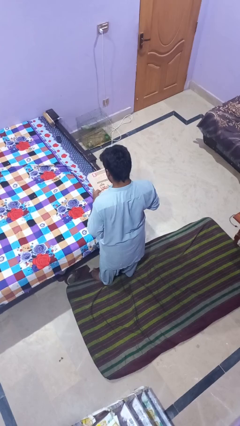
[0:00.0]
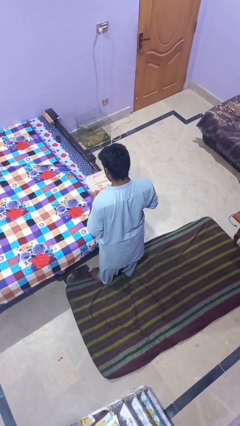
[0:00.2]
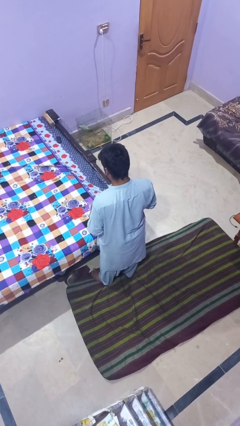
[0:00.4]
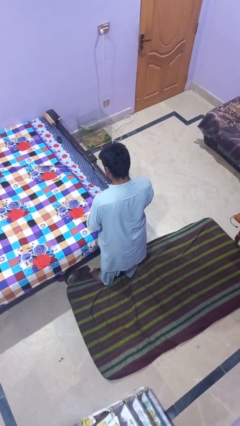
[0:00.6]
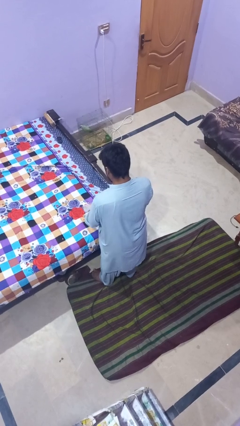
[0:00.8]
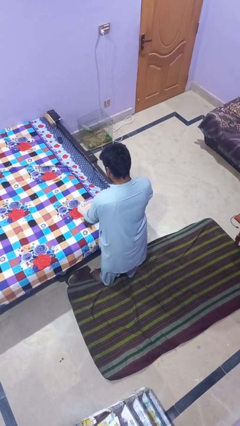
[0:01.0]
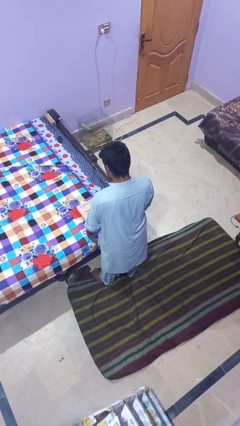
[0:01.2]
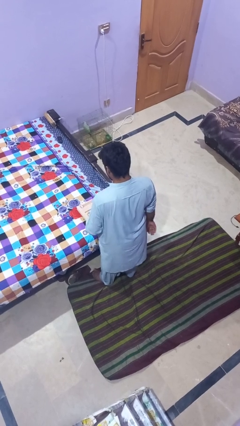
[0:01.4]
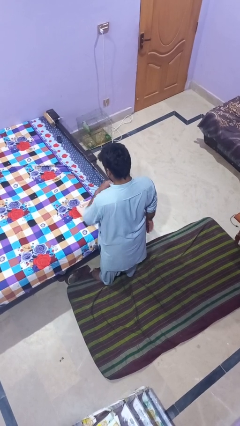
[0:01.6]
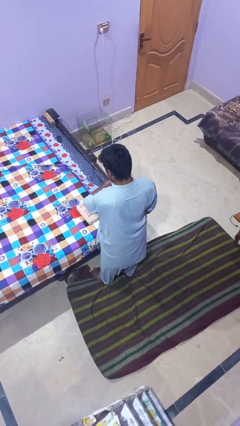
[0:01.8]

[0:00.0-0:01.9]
person puts down object on bed

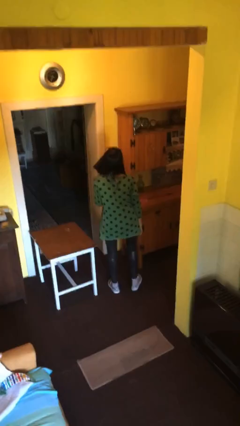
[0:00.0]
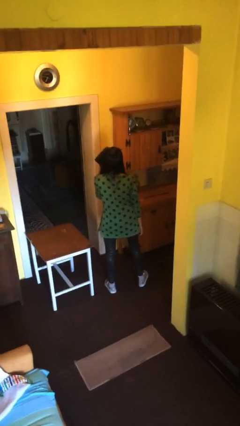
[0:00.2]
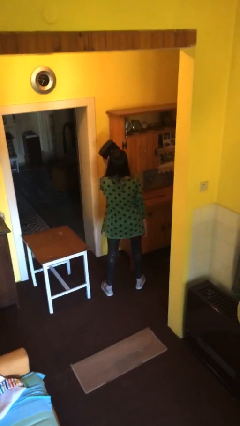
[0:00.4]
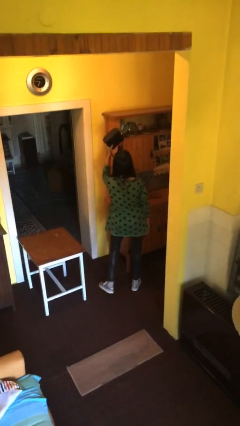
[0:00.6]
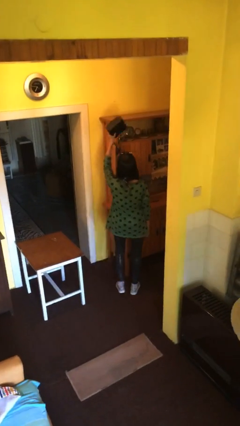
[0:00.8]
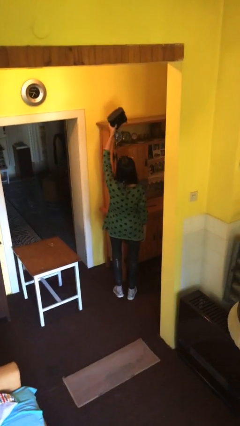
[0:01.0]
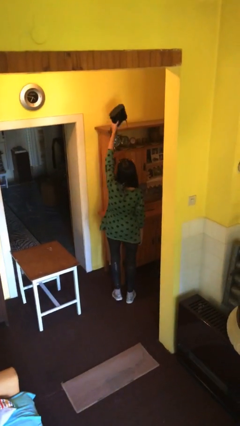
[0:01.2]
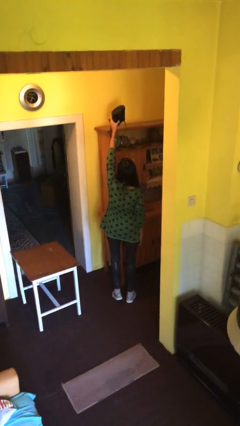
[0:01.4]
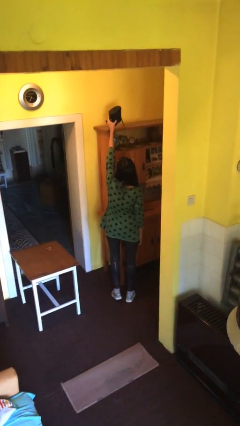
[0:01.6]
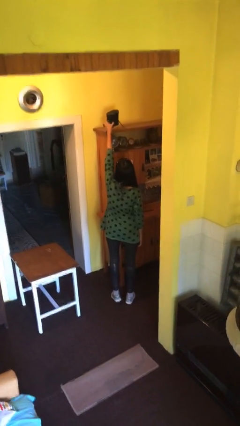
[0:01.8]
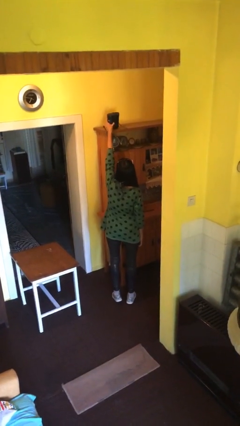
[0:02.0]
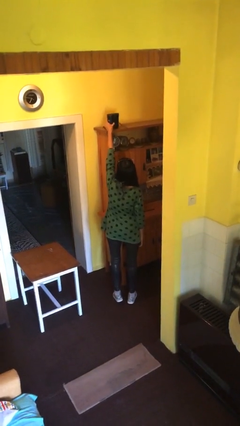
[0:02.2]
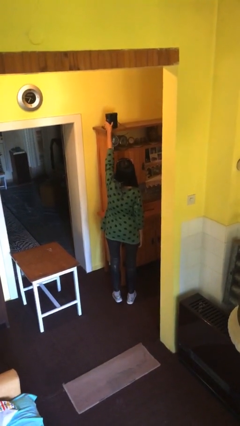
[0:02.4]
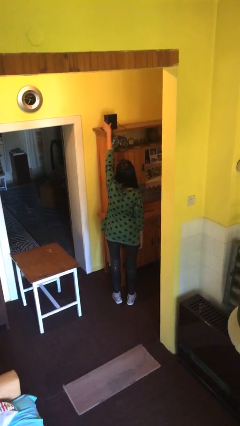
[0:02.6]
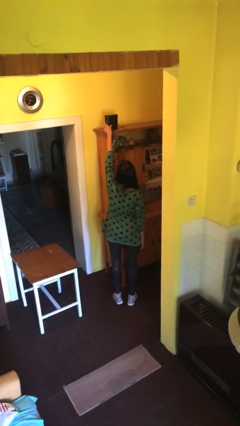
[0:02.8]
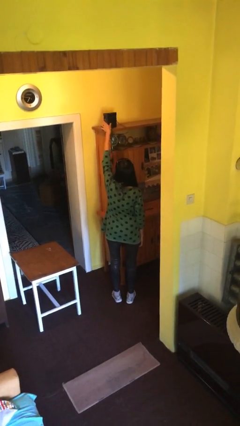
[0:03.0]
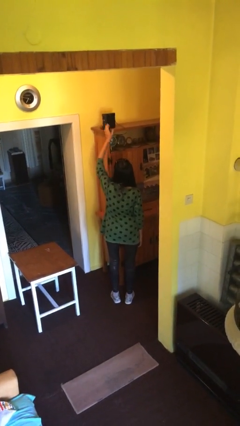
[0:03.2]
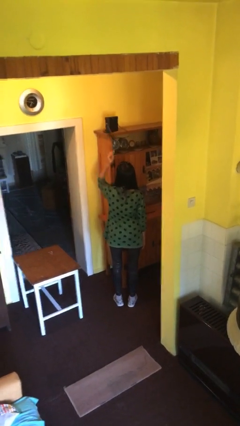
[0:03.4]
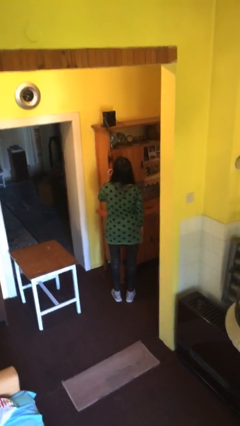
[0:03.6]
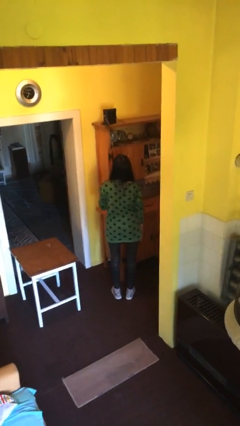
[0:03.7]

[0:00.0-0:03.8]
person puts down object on shelf

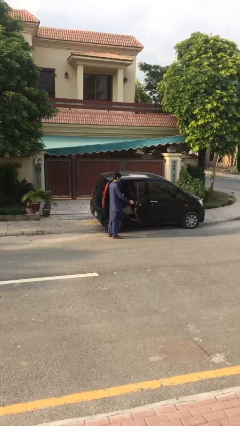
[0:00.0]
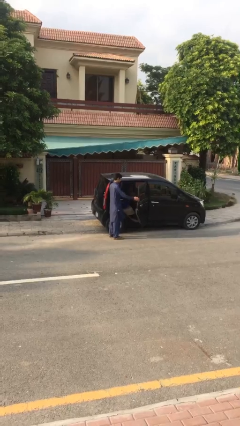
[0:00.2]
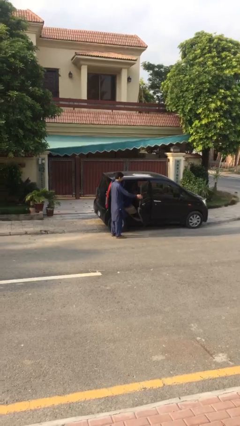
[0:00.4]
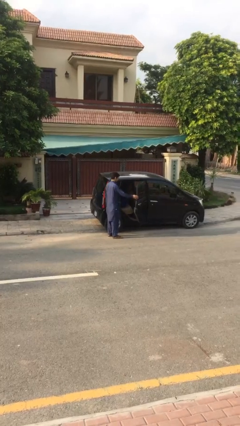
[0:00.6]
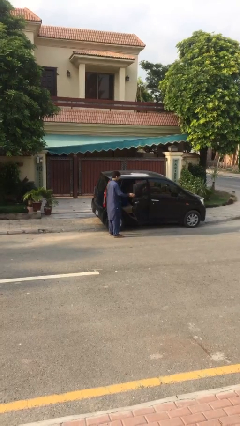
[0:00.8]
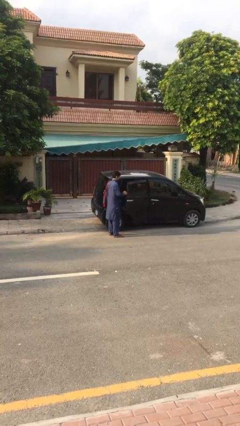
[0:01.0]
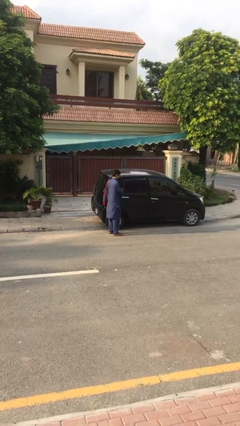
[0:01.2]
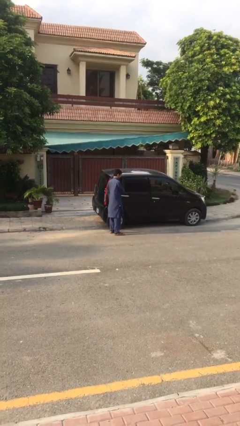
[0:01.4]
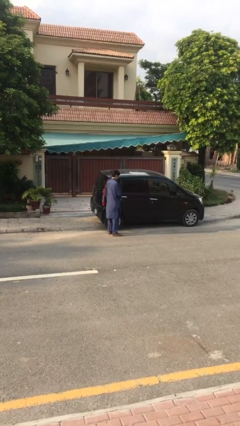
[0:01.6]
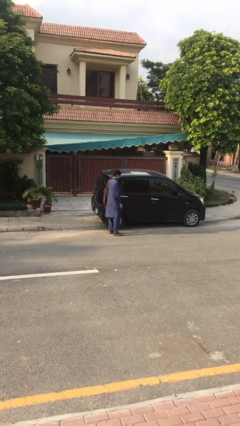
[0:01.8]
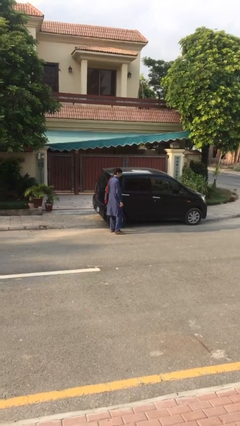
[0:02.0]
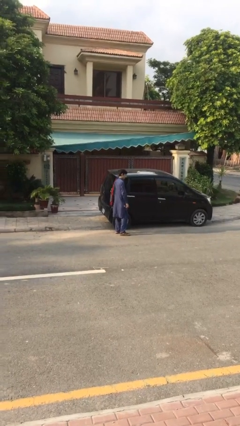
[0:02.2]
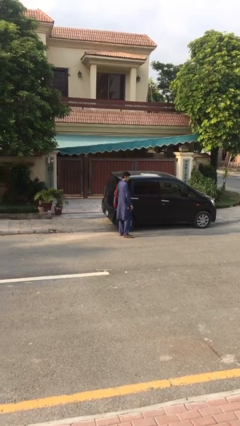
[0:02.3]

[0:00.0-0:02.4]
person closes car door

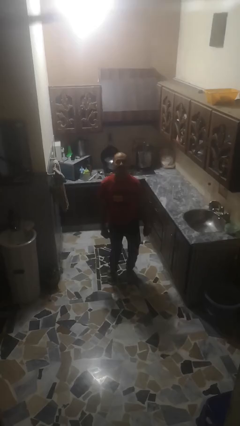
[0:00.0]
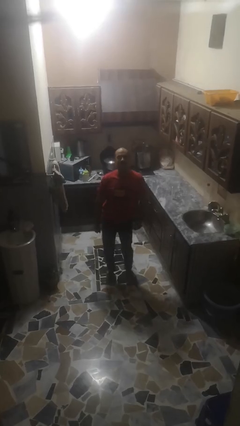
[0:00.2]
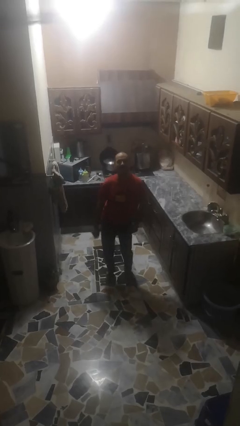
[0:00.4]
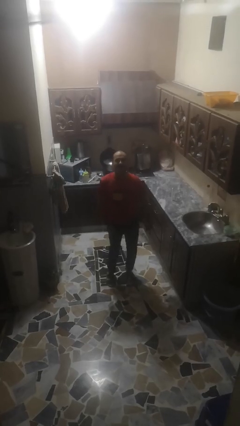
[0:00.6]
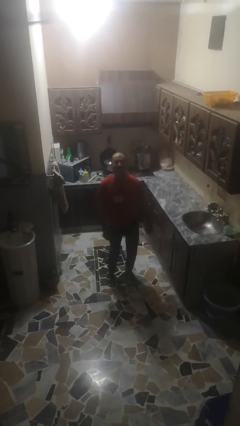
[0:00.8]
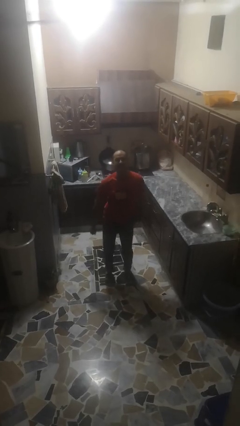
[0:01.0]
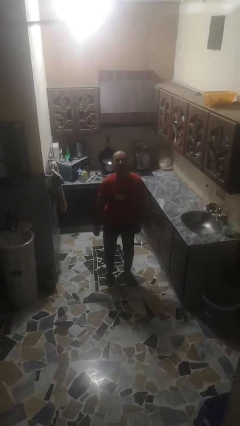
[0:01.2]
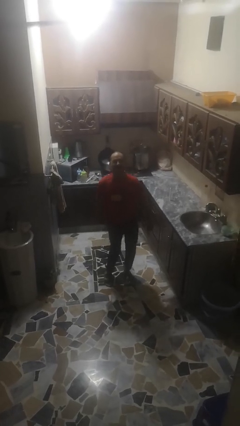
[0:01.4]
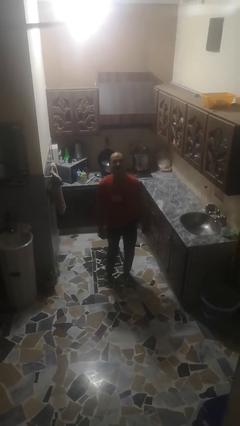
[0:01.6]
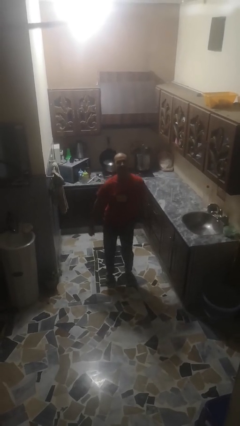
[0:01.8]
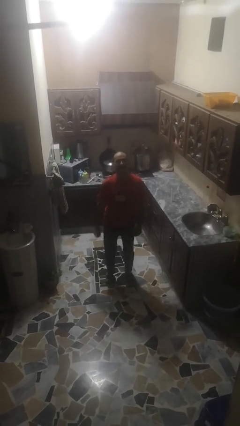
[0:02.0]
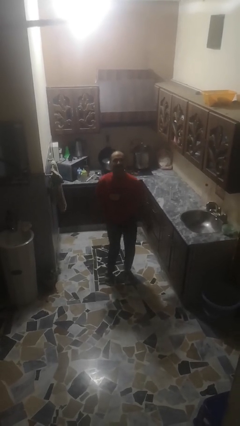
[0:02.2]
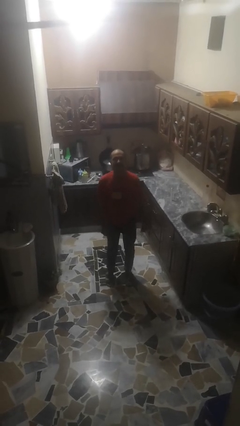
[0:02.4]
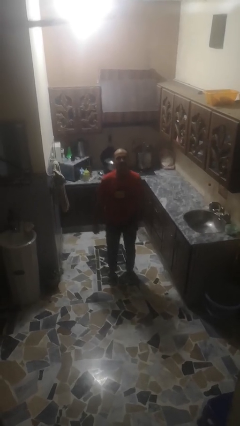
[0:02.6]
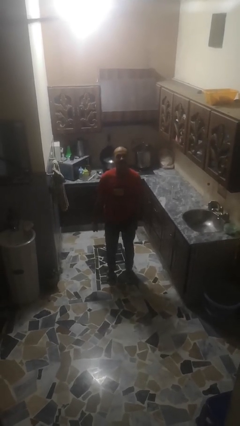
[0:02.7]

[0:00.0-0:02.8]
person wiggles hips

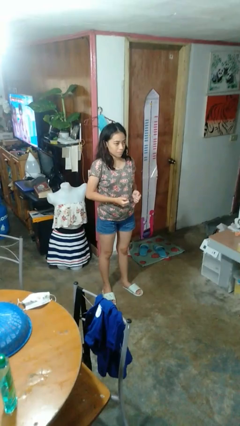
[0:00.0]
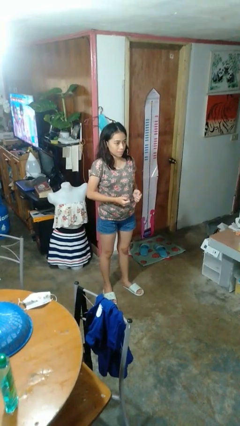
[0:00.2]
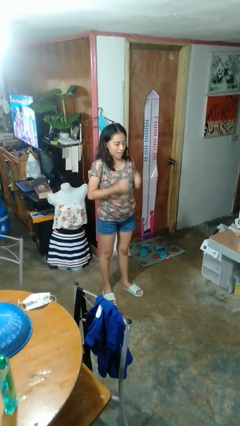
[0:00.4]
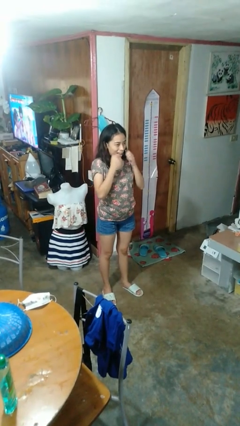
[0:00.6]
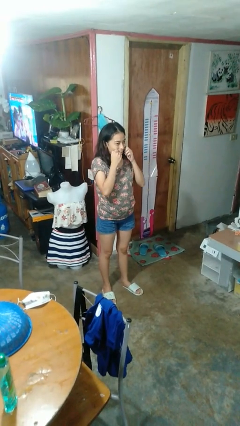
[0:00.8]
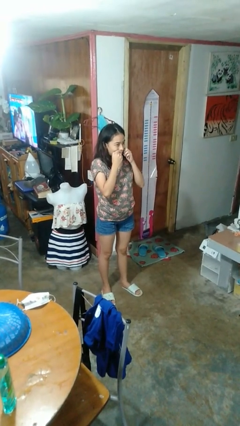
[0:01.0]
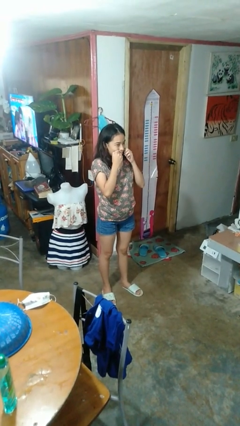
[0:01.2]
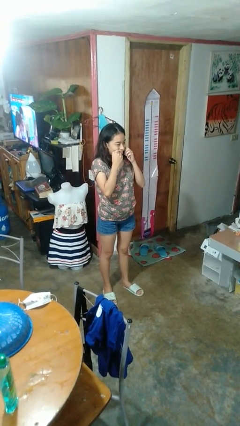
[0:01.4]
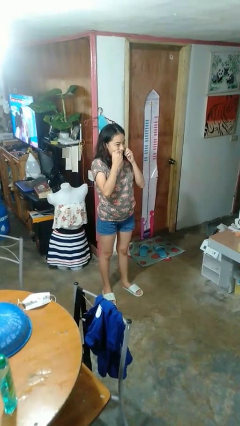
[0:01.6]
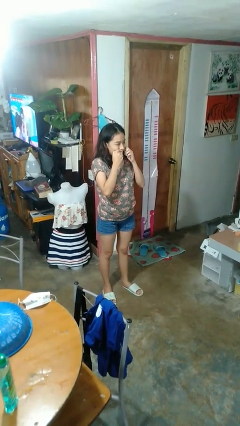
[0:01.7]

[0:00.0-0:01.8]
person flosses

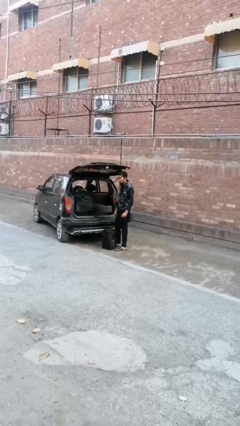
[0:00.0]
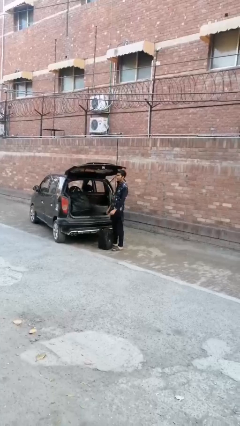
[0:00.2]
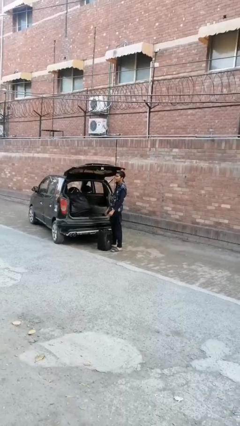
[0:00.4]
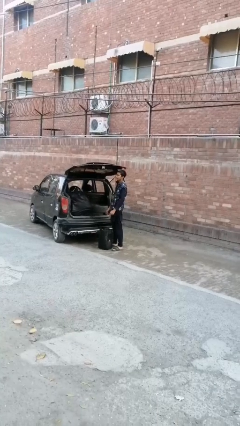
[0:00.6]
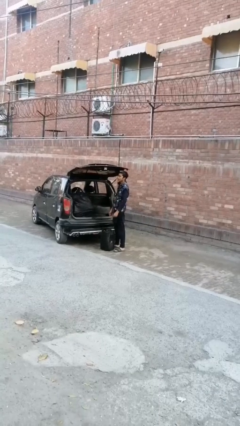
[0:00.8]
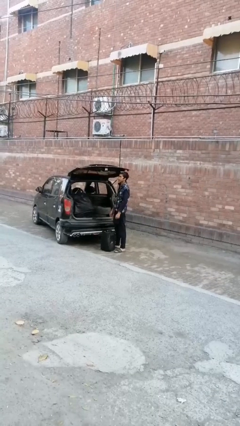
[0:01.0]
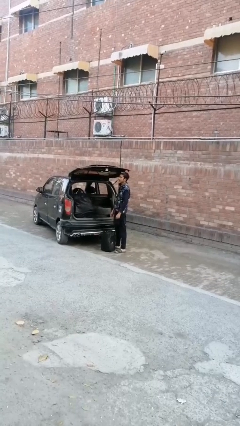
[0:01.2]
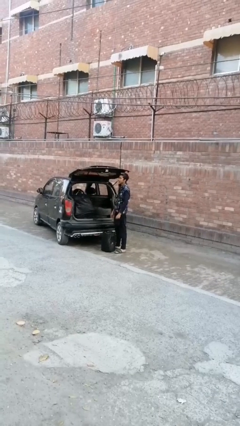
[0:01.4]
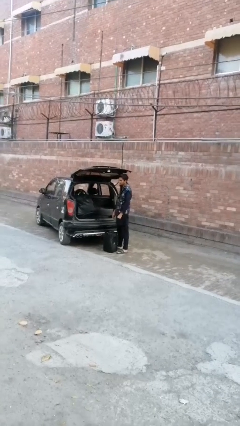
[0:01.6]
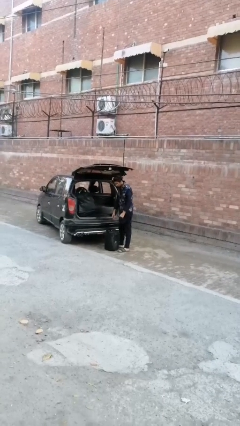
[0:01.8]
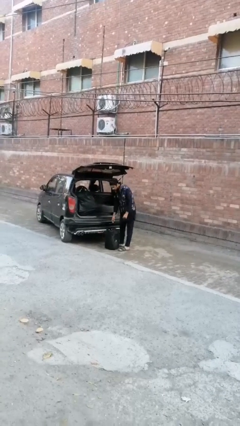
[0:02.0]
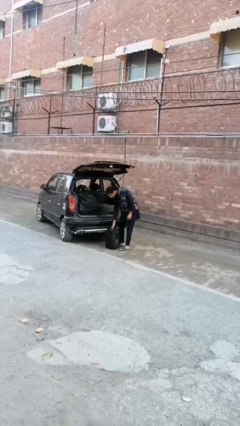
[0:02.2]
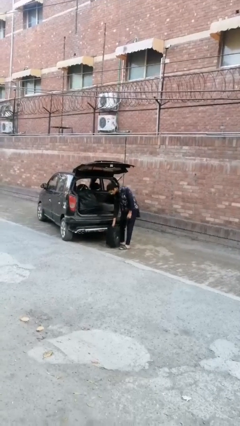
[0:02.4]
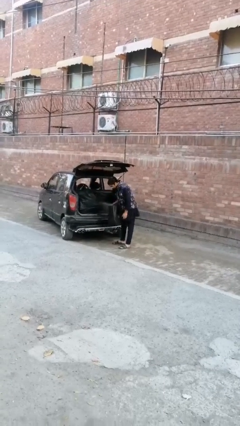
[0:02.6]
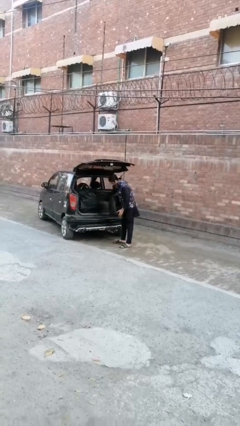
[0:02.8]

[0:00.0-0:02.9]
person unloads car

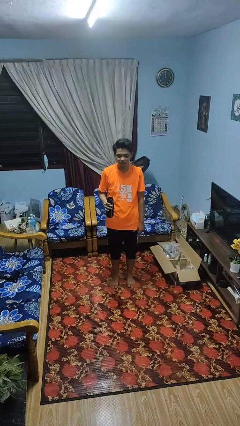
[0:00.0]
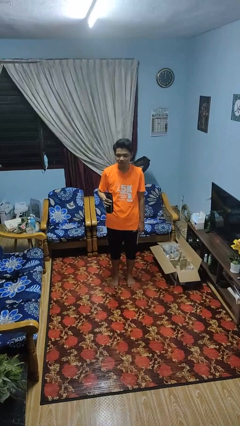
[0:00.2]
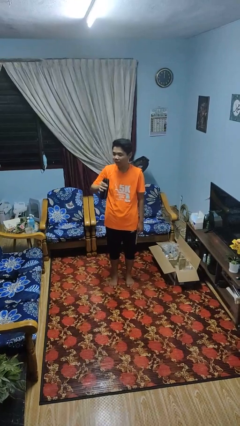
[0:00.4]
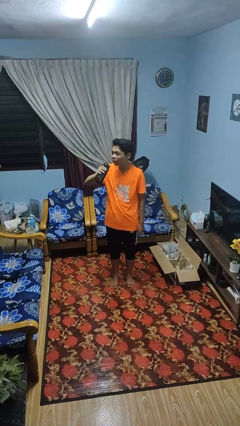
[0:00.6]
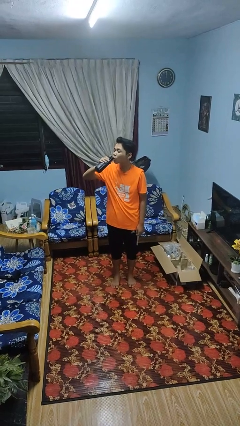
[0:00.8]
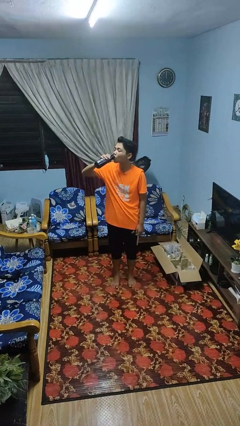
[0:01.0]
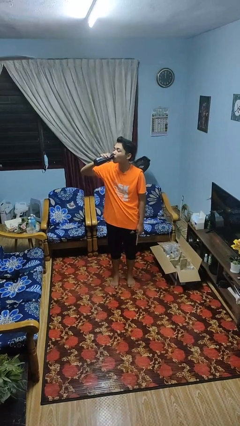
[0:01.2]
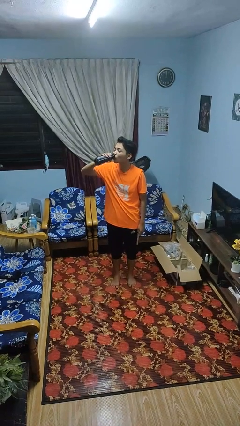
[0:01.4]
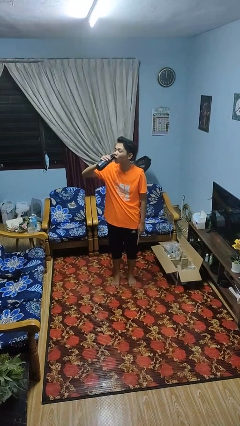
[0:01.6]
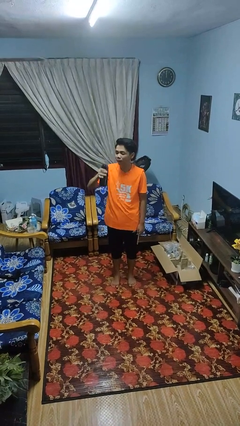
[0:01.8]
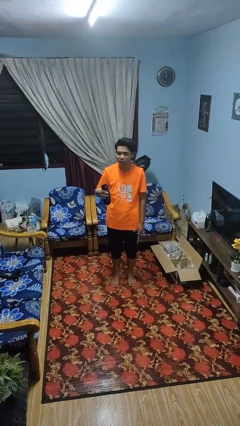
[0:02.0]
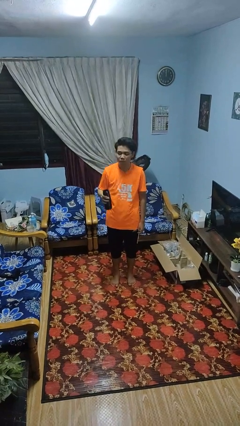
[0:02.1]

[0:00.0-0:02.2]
person drinks from bottle
